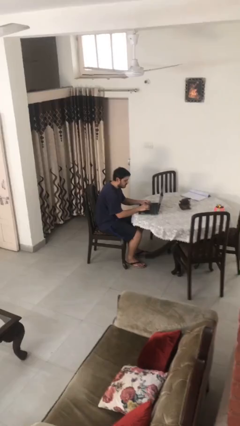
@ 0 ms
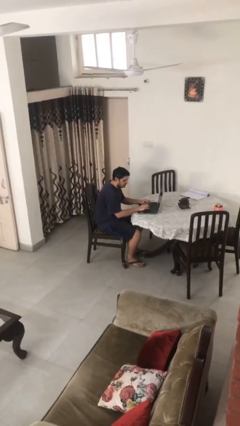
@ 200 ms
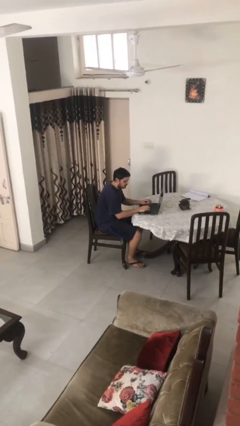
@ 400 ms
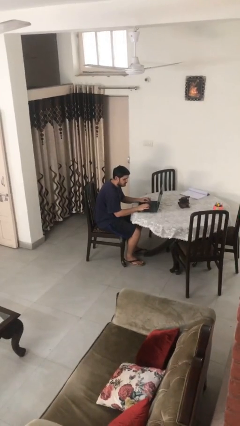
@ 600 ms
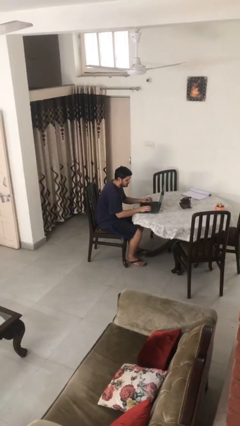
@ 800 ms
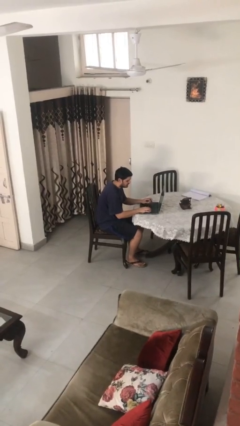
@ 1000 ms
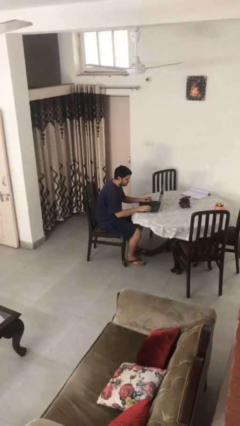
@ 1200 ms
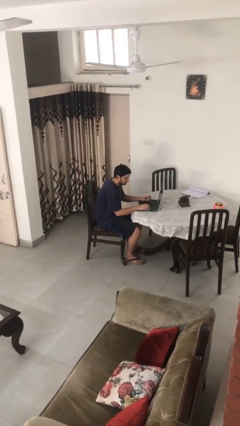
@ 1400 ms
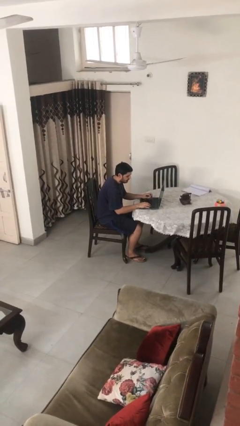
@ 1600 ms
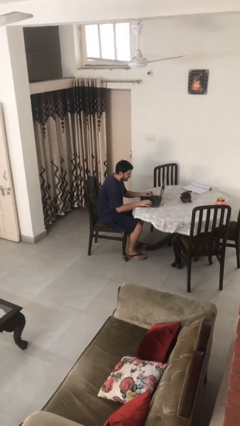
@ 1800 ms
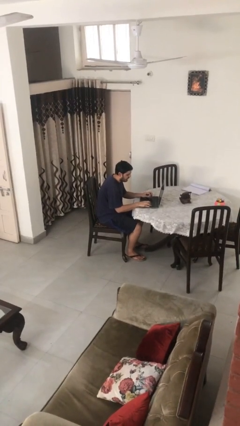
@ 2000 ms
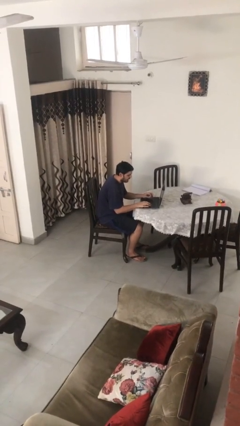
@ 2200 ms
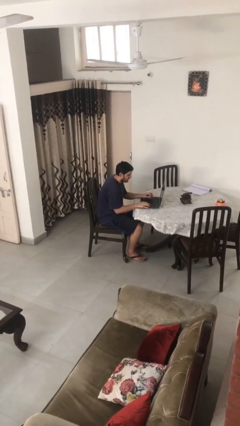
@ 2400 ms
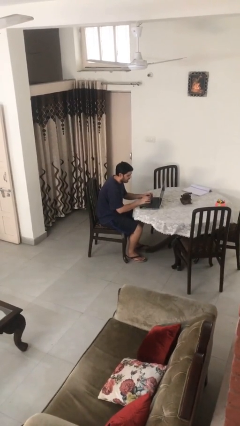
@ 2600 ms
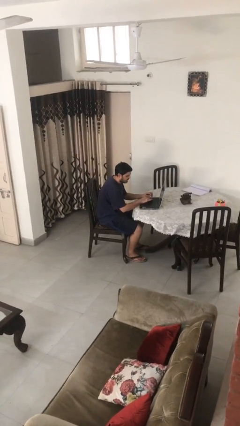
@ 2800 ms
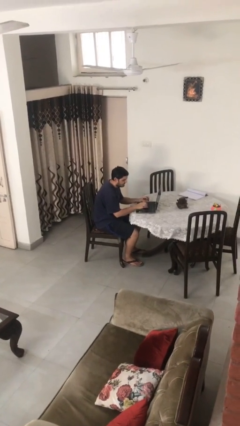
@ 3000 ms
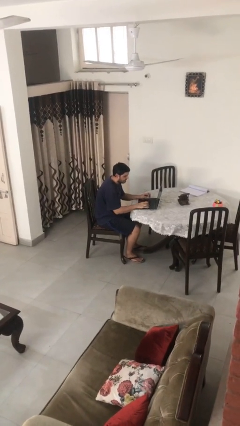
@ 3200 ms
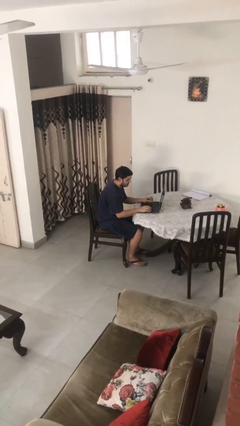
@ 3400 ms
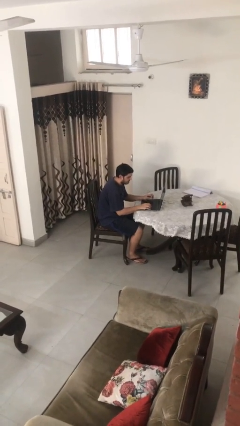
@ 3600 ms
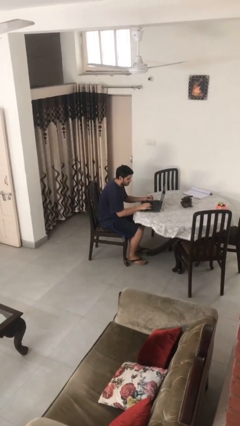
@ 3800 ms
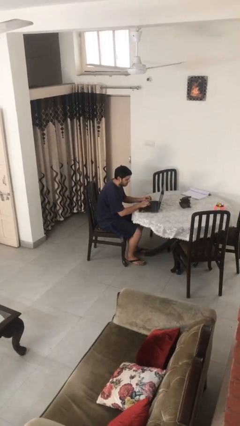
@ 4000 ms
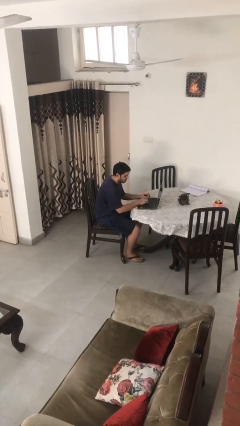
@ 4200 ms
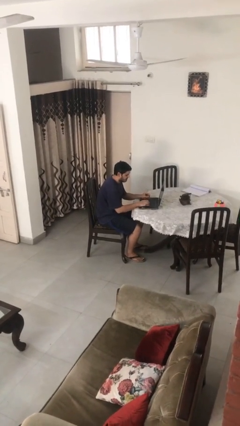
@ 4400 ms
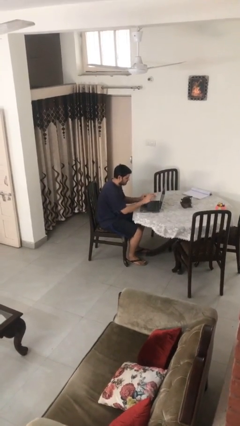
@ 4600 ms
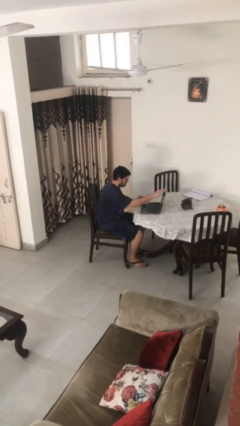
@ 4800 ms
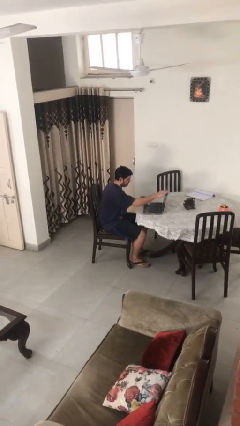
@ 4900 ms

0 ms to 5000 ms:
person interacts with laptop

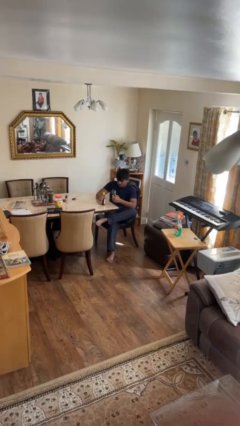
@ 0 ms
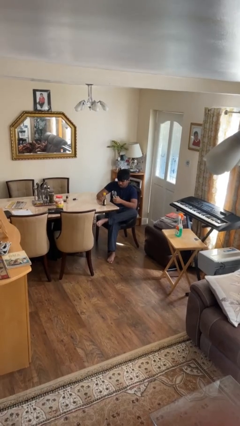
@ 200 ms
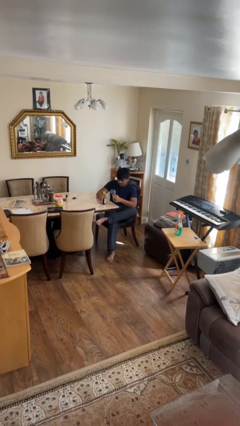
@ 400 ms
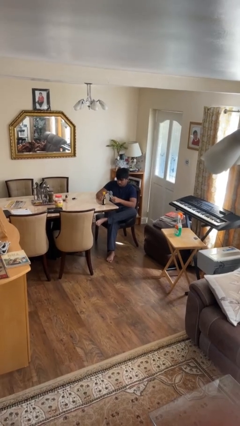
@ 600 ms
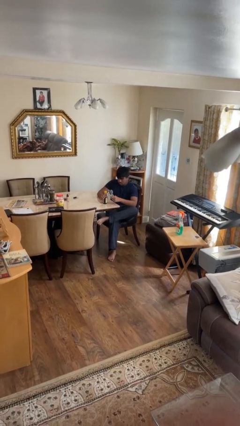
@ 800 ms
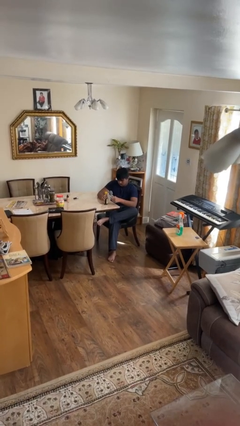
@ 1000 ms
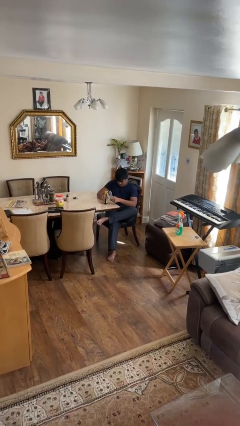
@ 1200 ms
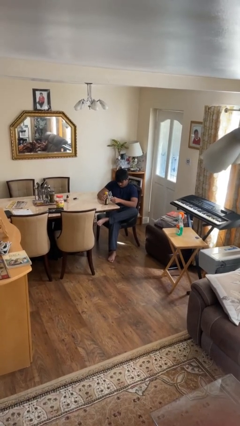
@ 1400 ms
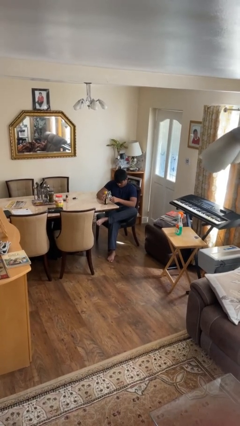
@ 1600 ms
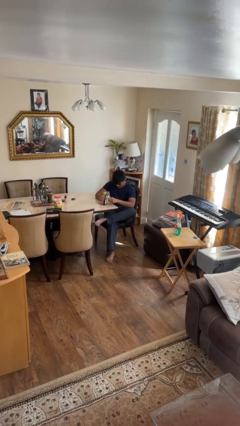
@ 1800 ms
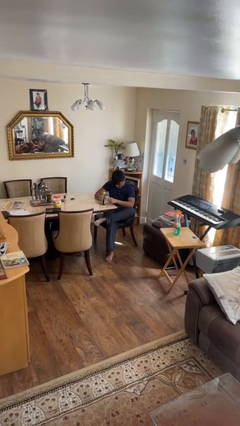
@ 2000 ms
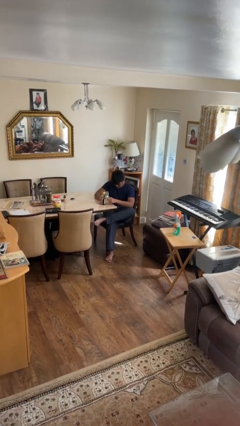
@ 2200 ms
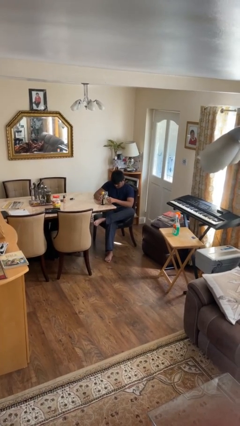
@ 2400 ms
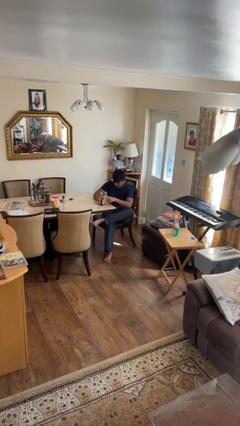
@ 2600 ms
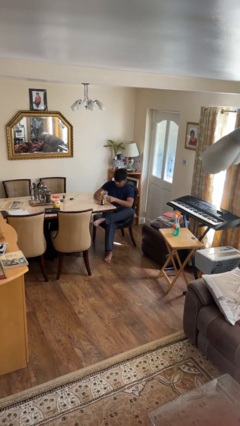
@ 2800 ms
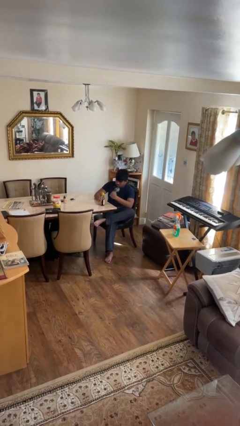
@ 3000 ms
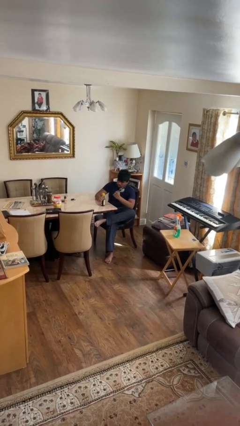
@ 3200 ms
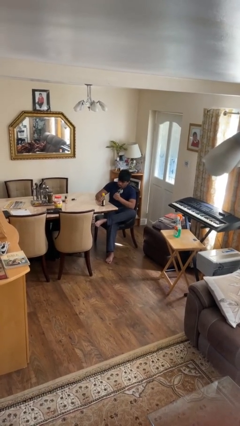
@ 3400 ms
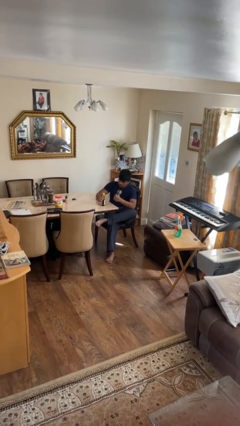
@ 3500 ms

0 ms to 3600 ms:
person opens can with can opener

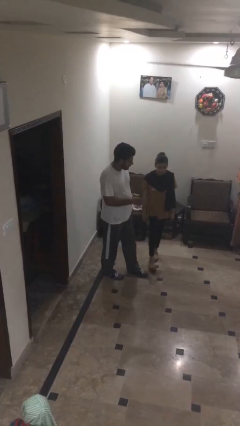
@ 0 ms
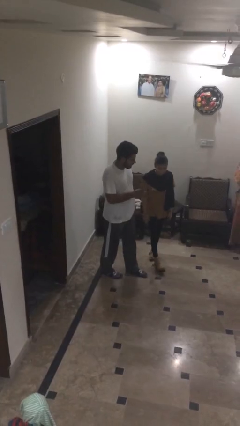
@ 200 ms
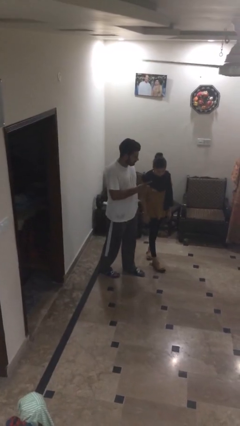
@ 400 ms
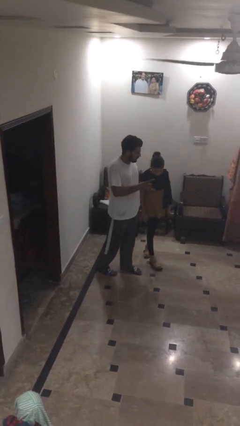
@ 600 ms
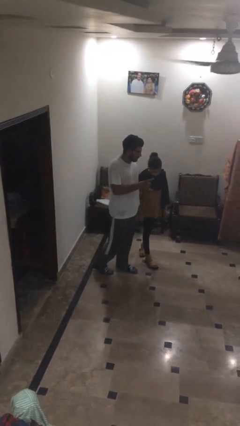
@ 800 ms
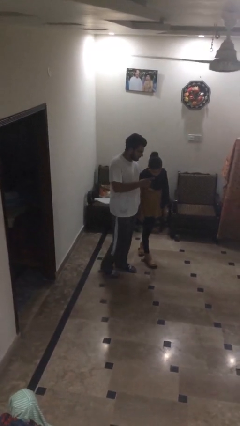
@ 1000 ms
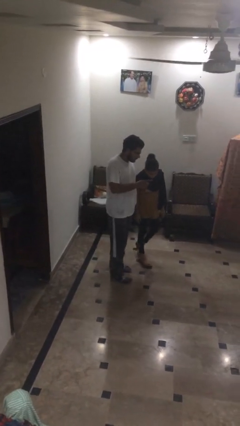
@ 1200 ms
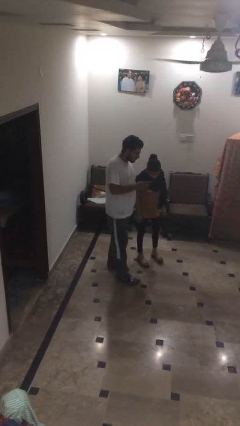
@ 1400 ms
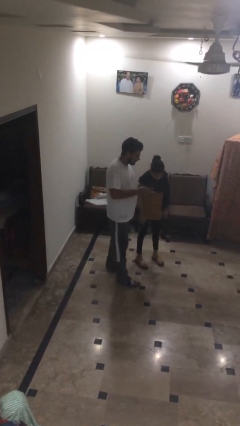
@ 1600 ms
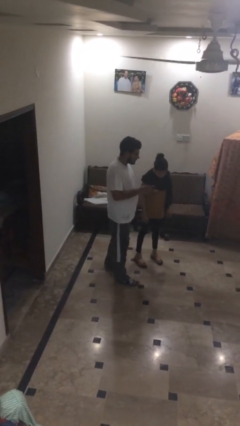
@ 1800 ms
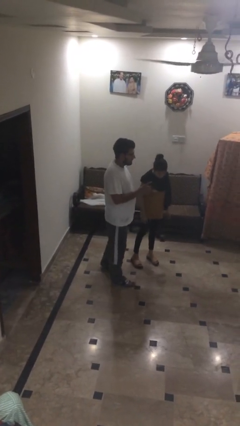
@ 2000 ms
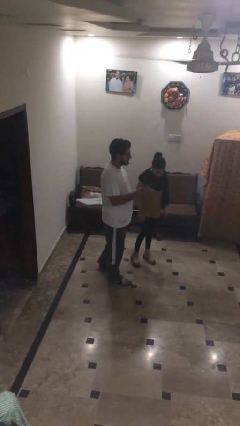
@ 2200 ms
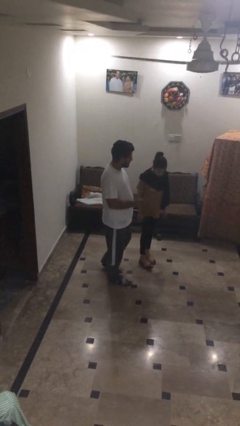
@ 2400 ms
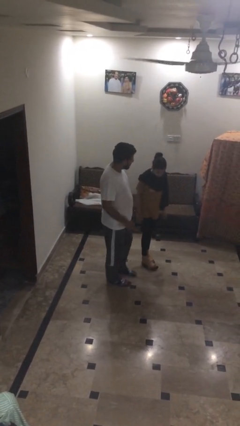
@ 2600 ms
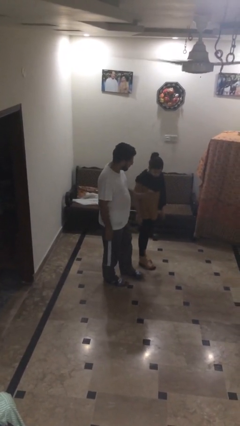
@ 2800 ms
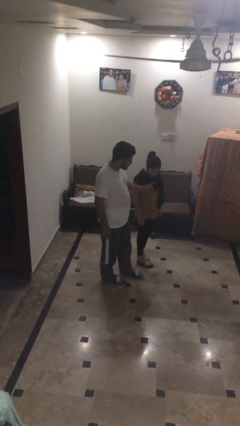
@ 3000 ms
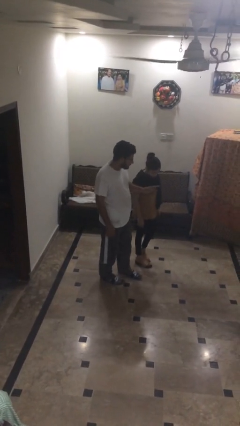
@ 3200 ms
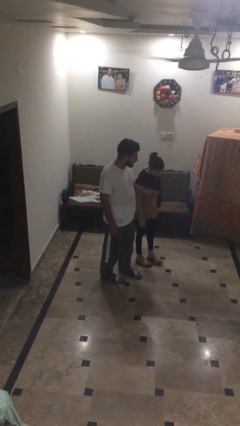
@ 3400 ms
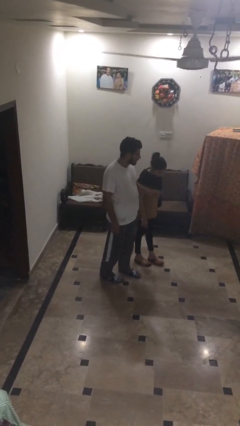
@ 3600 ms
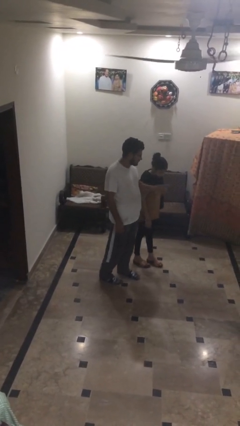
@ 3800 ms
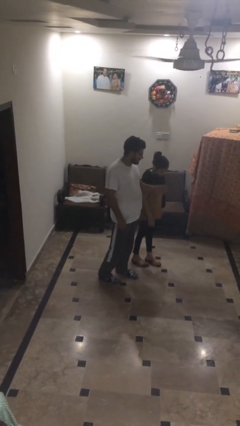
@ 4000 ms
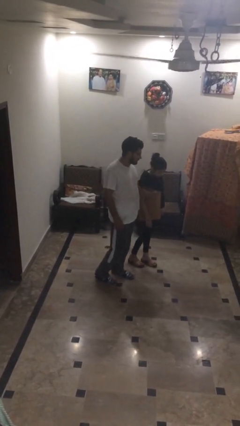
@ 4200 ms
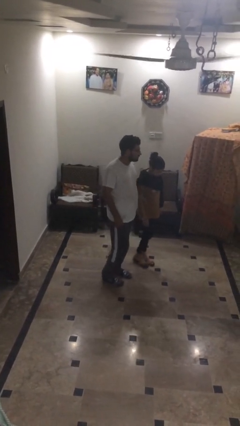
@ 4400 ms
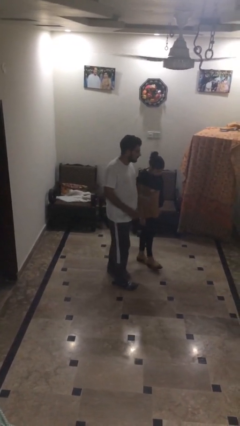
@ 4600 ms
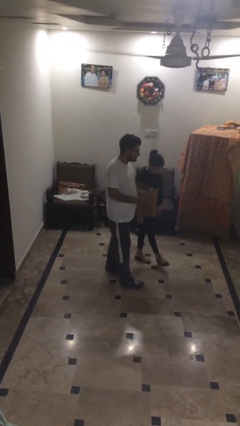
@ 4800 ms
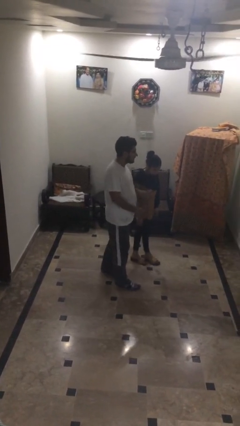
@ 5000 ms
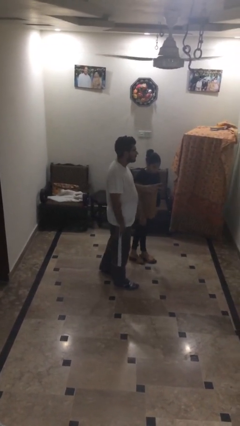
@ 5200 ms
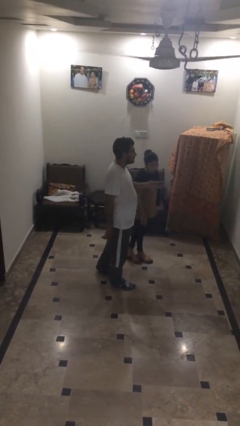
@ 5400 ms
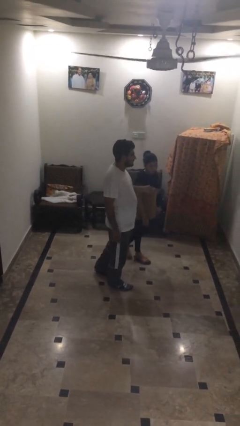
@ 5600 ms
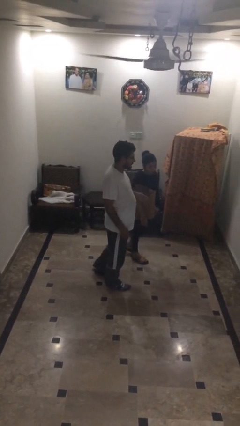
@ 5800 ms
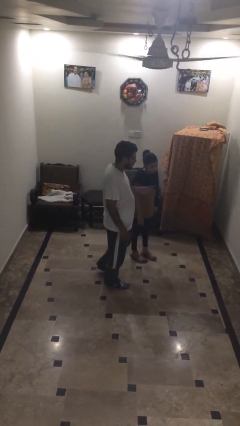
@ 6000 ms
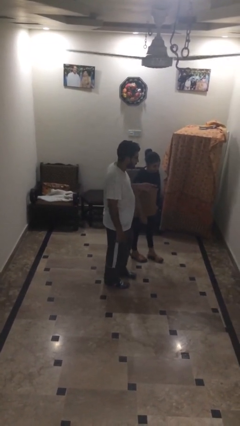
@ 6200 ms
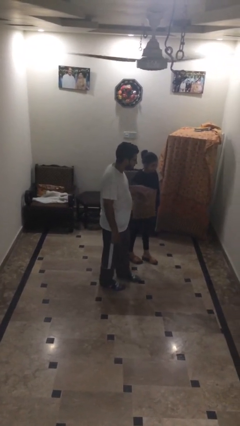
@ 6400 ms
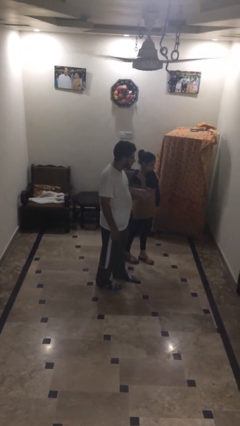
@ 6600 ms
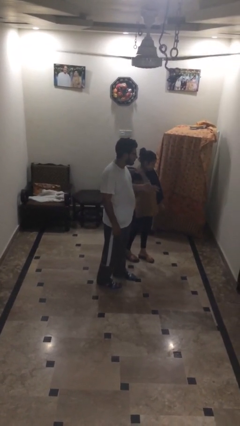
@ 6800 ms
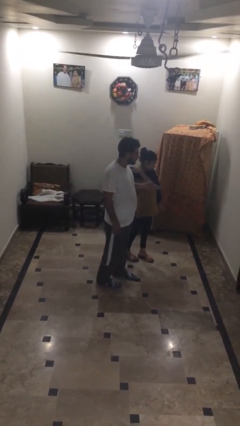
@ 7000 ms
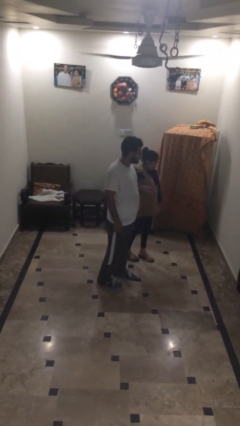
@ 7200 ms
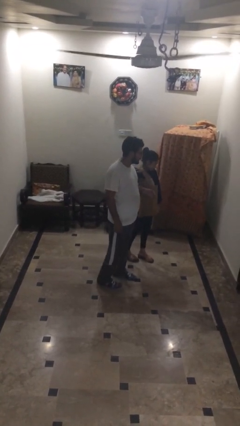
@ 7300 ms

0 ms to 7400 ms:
person talks to person

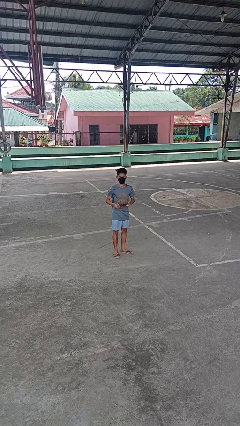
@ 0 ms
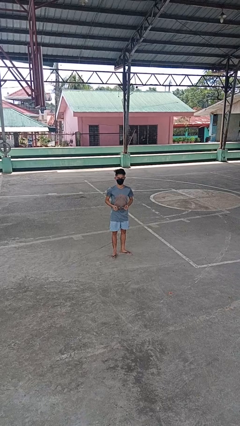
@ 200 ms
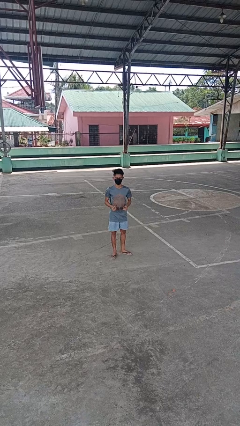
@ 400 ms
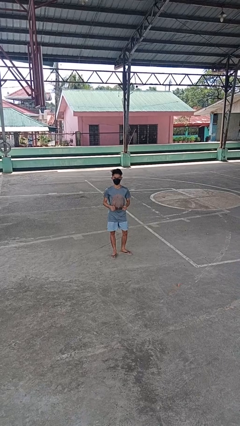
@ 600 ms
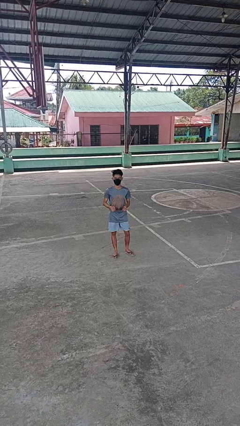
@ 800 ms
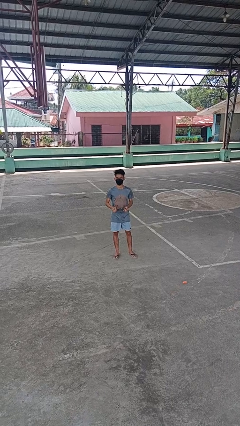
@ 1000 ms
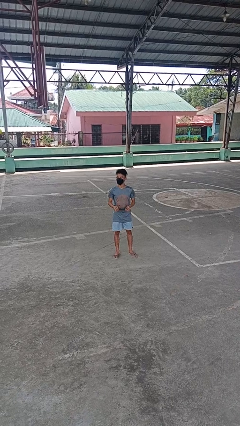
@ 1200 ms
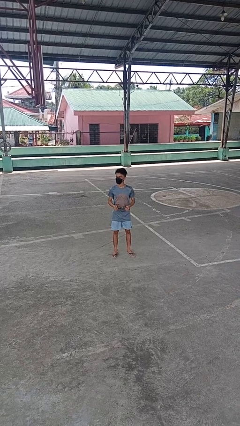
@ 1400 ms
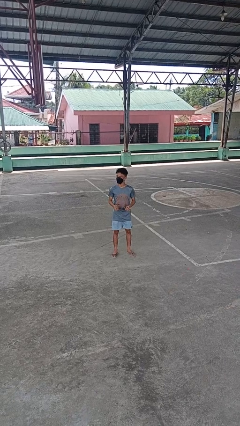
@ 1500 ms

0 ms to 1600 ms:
person takes off glasses
